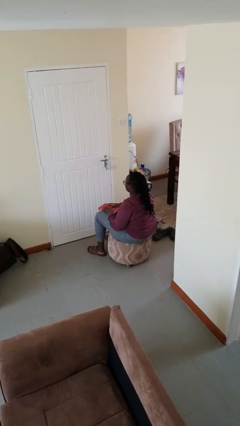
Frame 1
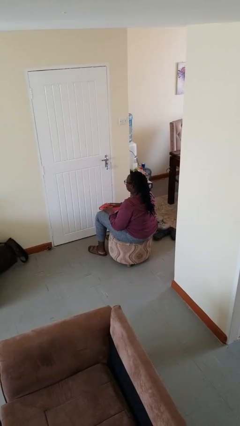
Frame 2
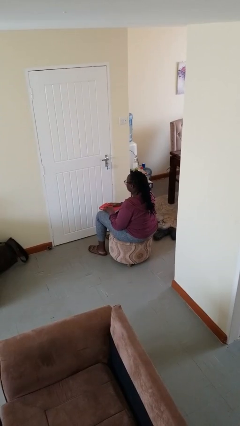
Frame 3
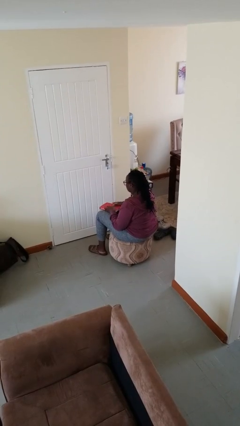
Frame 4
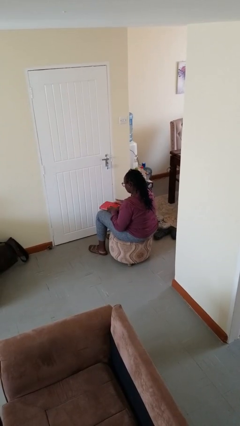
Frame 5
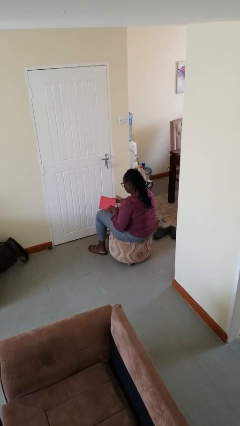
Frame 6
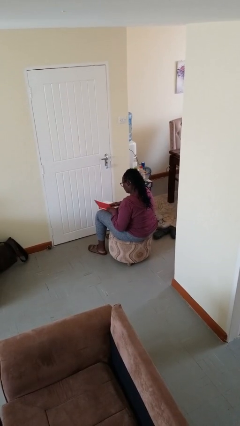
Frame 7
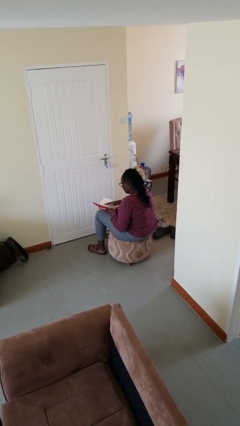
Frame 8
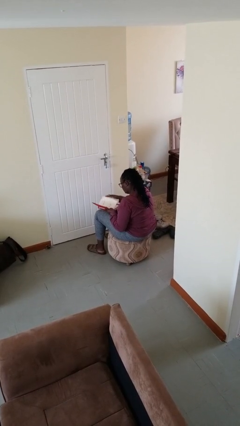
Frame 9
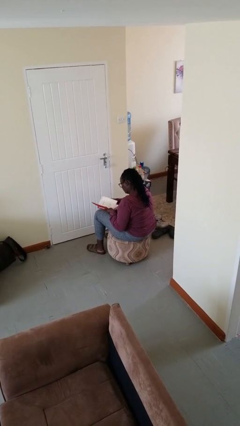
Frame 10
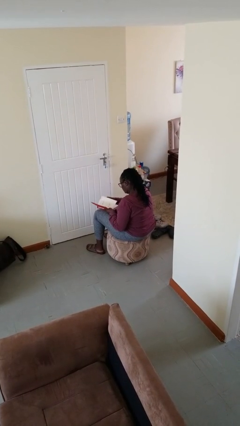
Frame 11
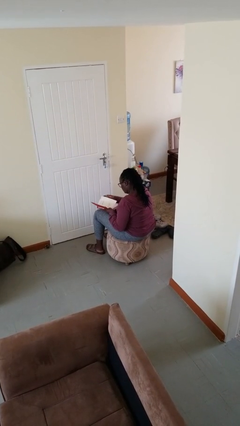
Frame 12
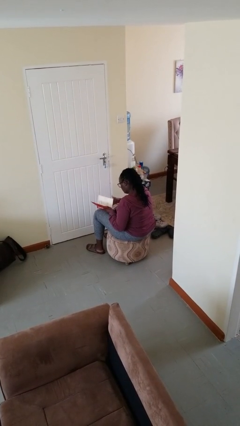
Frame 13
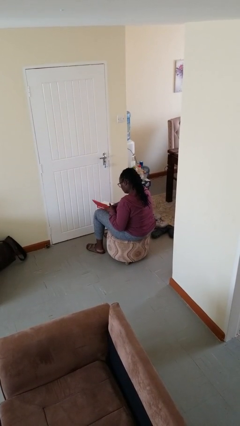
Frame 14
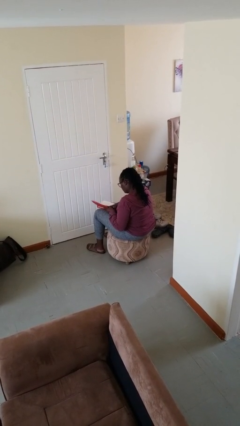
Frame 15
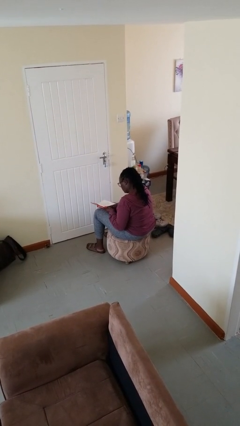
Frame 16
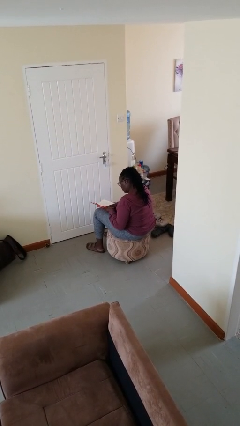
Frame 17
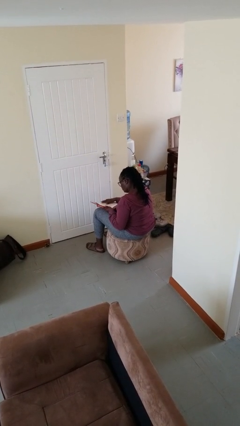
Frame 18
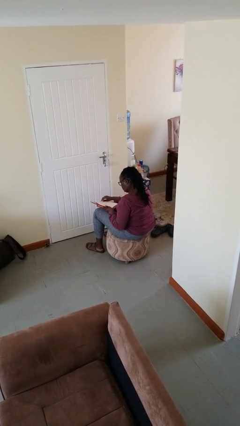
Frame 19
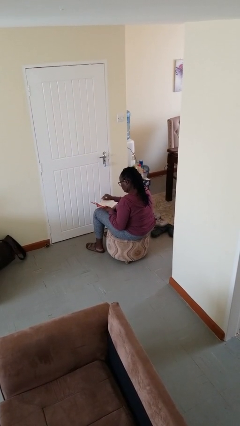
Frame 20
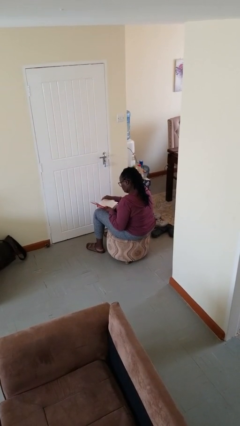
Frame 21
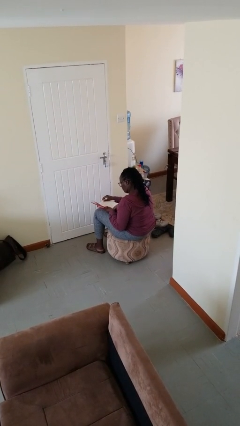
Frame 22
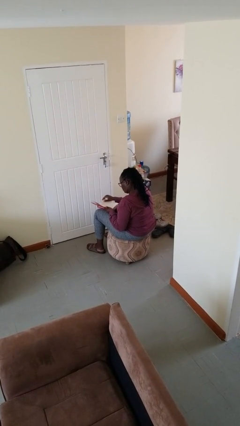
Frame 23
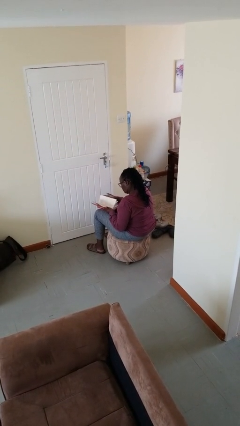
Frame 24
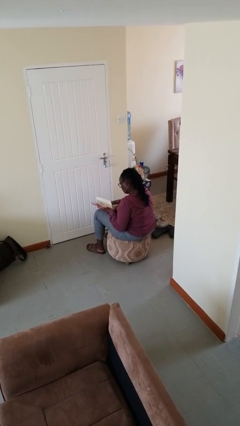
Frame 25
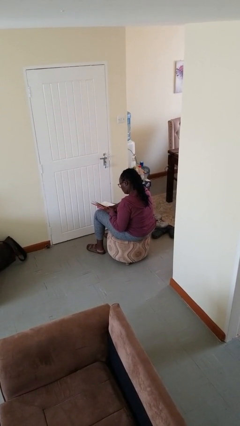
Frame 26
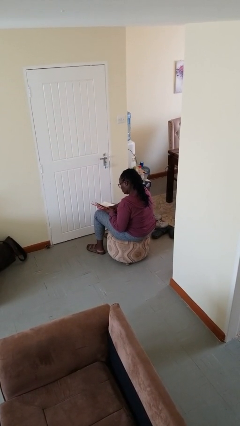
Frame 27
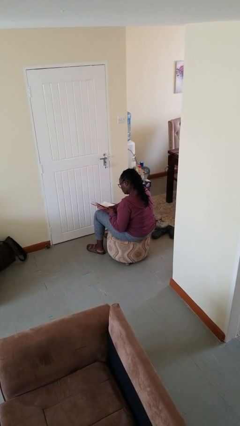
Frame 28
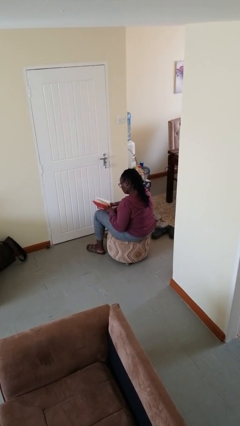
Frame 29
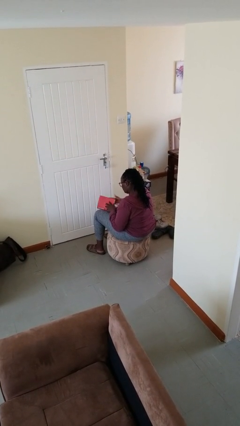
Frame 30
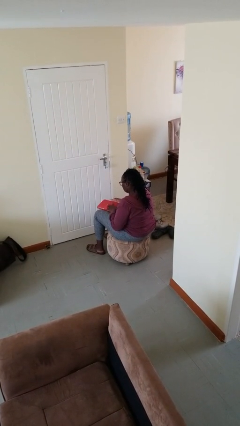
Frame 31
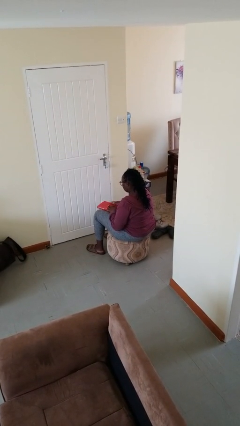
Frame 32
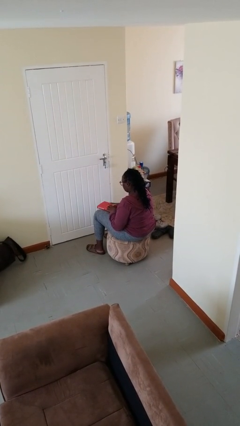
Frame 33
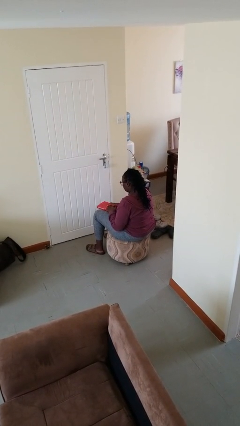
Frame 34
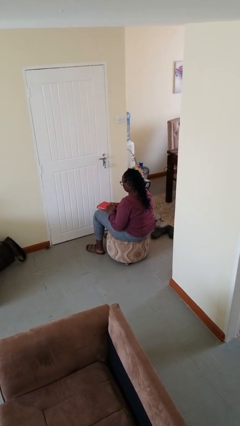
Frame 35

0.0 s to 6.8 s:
person reads book

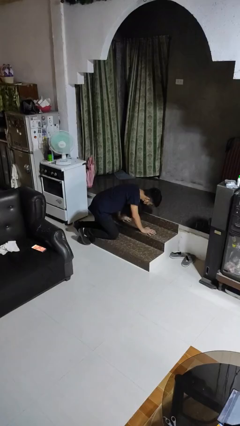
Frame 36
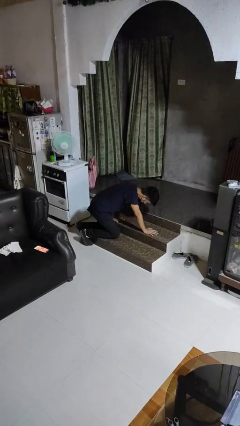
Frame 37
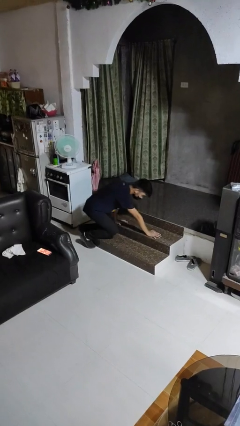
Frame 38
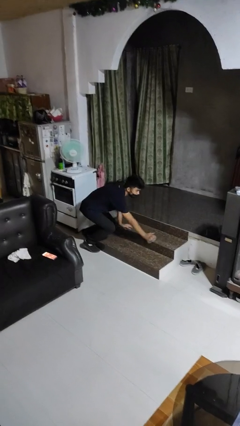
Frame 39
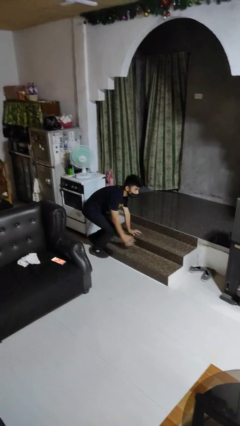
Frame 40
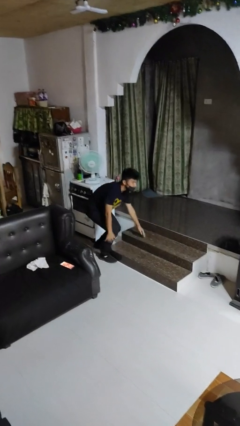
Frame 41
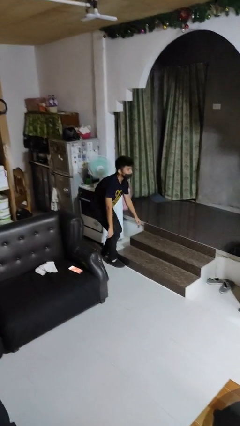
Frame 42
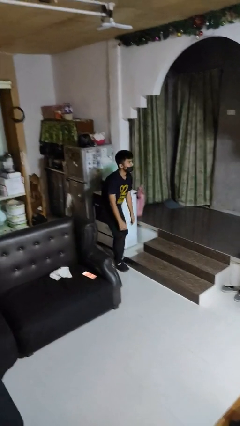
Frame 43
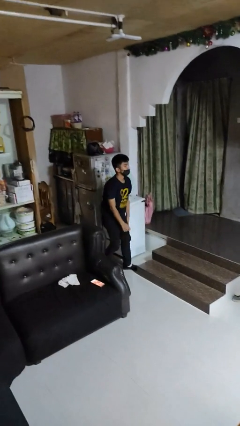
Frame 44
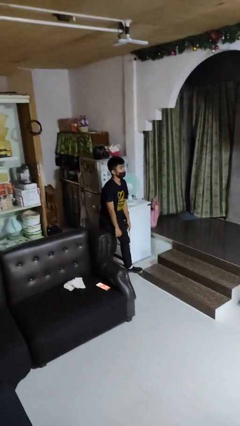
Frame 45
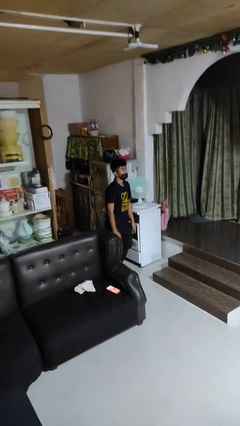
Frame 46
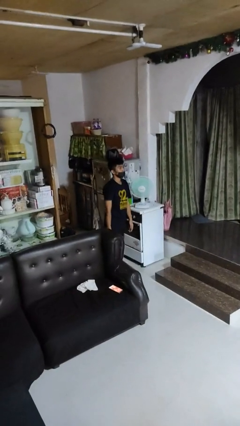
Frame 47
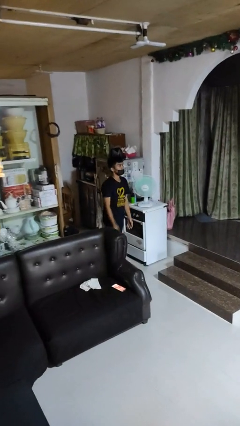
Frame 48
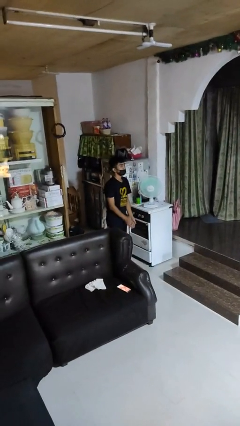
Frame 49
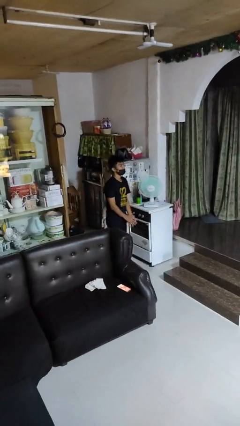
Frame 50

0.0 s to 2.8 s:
person stands up from floor

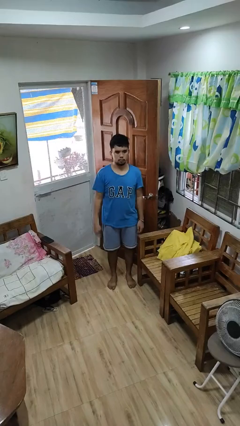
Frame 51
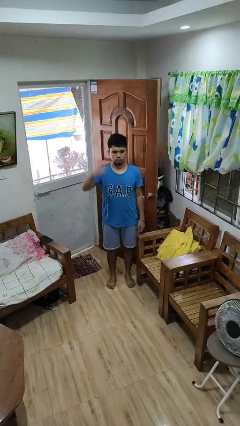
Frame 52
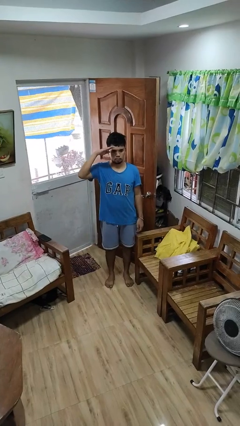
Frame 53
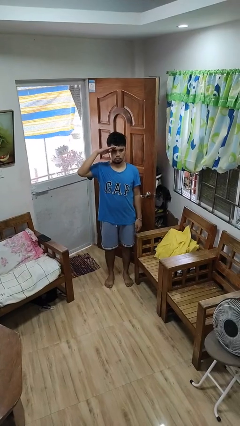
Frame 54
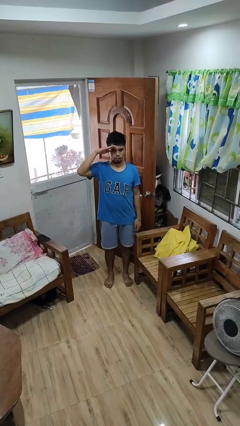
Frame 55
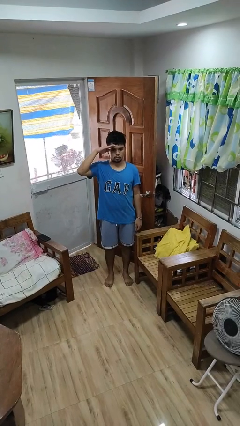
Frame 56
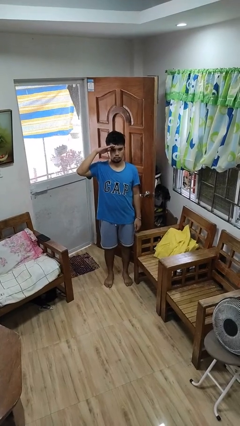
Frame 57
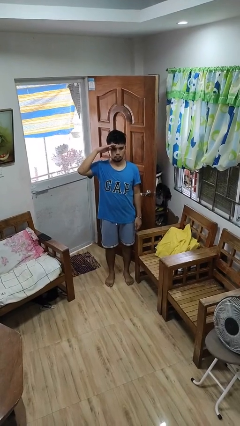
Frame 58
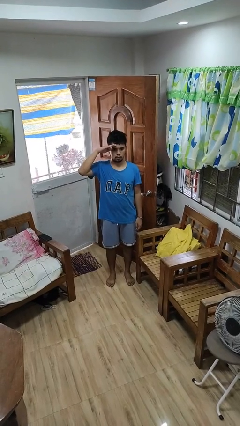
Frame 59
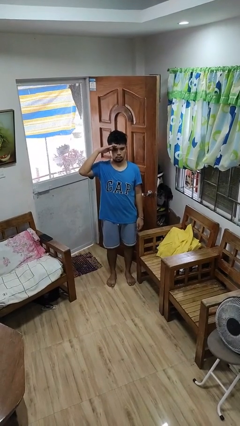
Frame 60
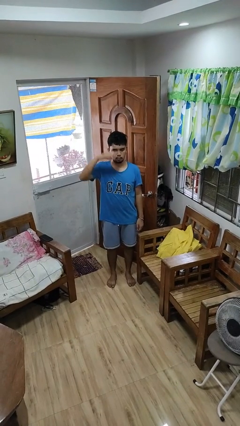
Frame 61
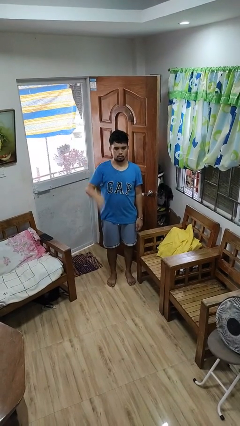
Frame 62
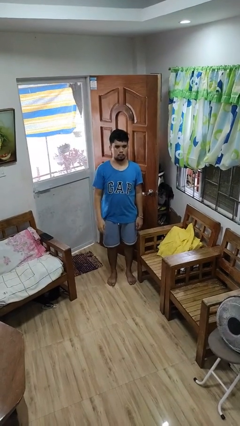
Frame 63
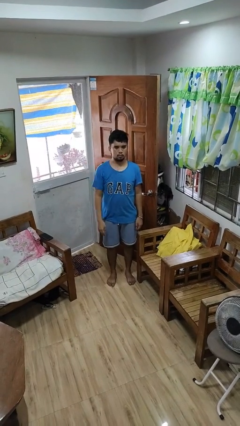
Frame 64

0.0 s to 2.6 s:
person salutes

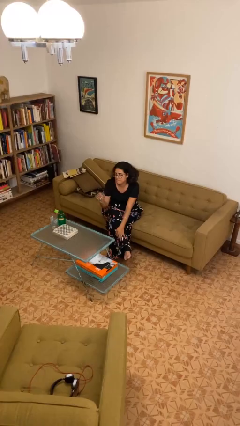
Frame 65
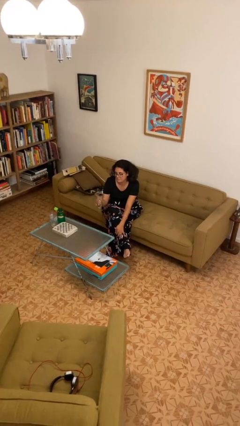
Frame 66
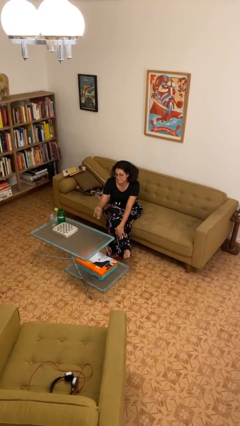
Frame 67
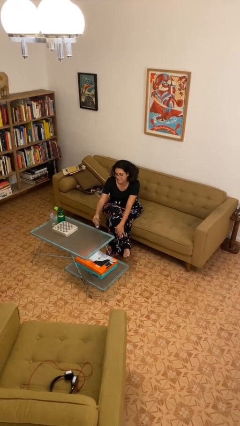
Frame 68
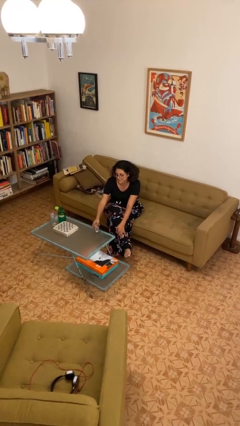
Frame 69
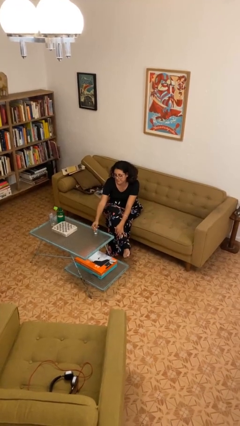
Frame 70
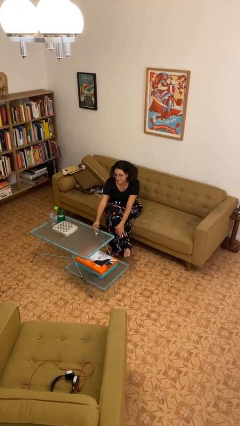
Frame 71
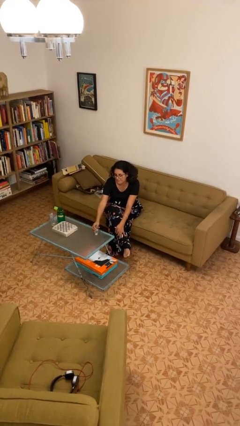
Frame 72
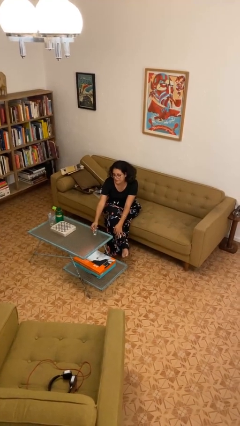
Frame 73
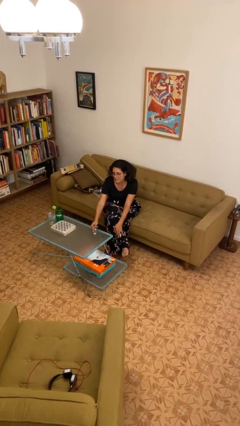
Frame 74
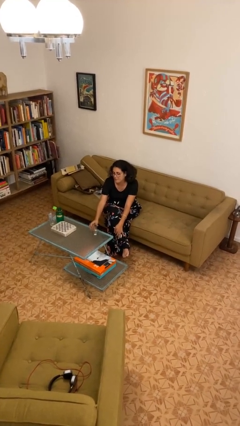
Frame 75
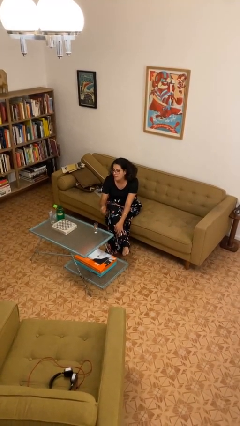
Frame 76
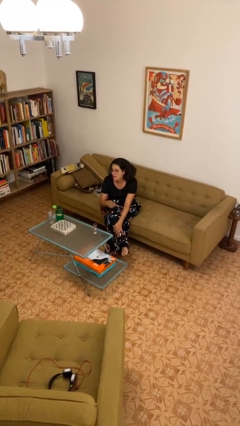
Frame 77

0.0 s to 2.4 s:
person puts down object on table

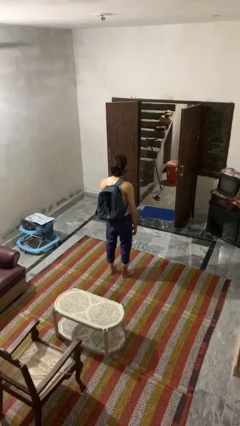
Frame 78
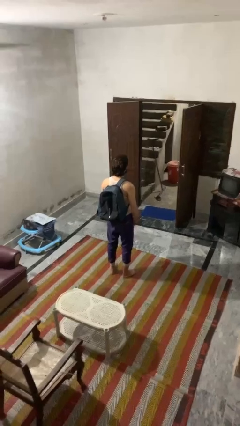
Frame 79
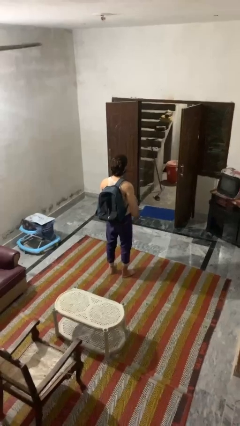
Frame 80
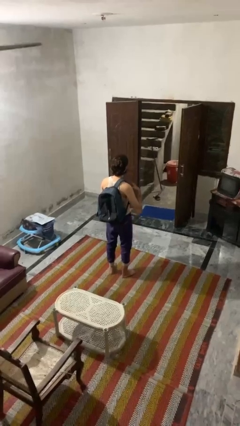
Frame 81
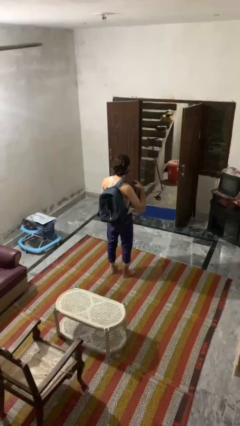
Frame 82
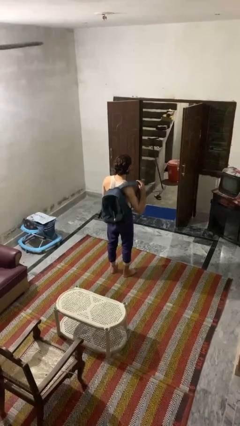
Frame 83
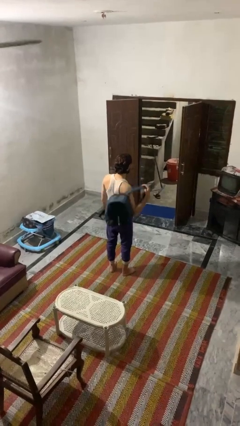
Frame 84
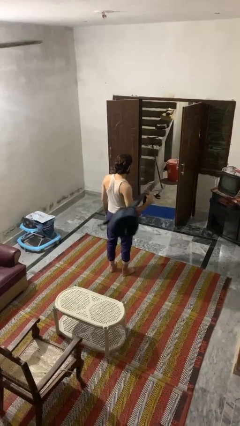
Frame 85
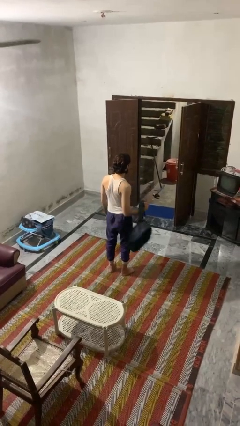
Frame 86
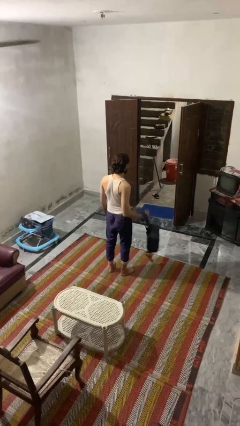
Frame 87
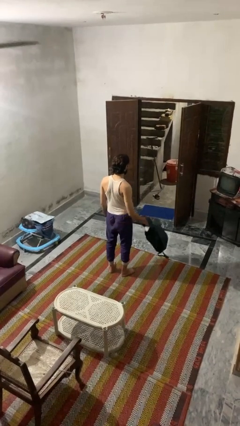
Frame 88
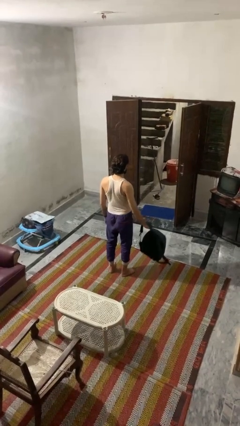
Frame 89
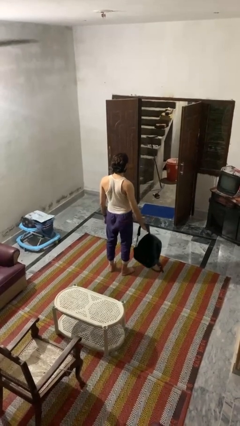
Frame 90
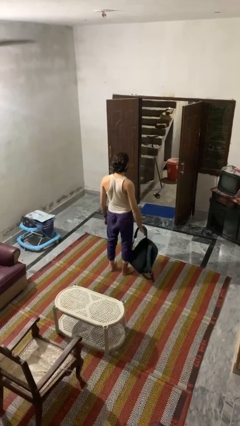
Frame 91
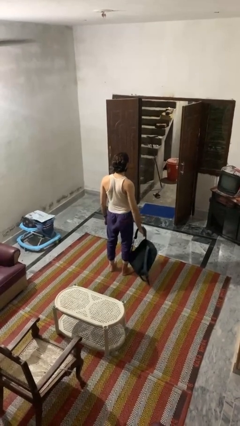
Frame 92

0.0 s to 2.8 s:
person takes off backpack
